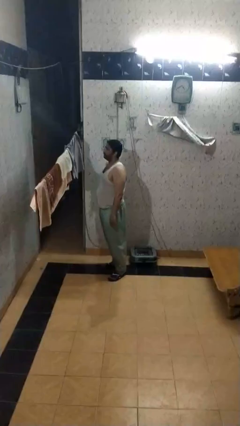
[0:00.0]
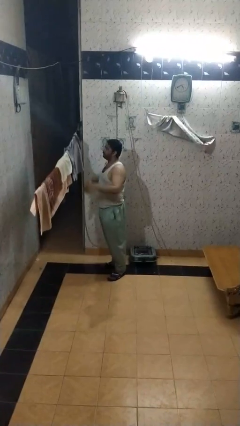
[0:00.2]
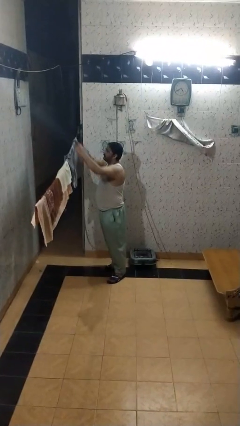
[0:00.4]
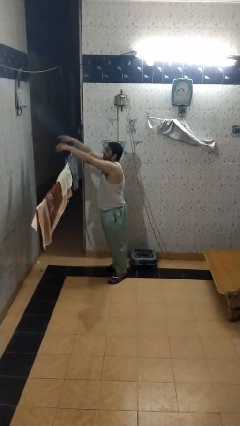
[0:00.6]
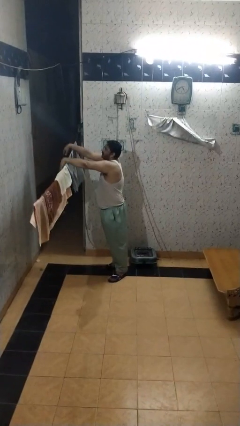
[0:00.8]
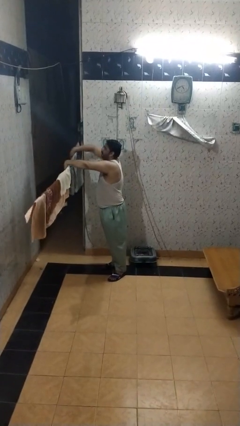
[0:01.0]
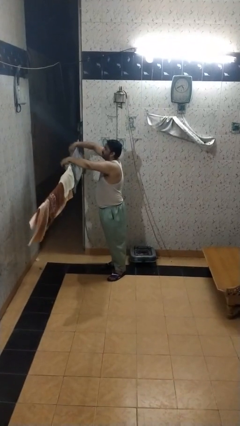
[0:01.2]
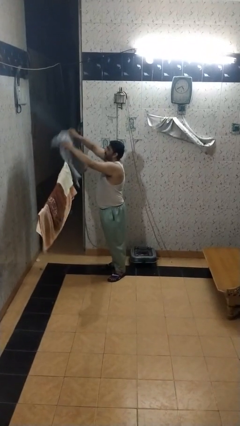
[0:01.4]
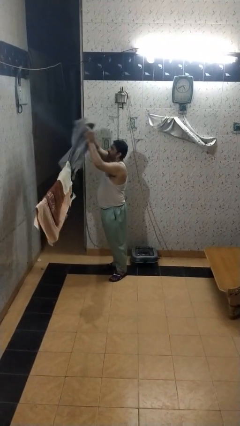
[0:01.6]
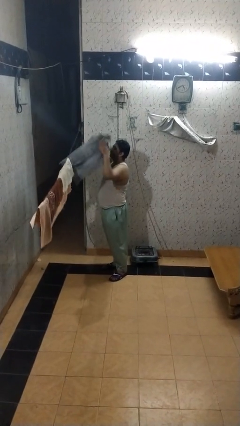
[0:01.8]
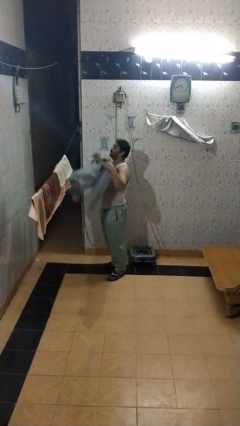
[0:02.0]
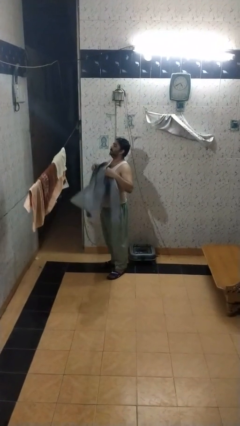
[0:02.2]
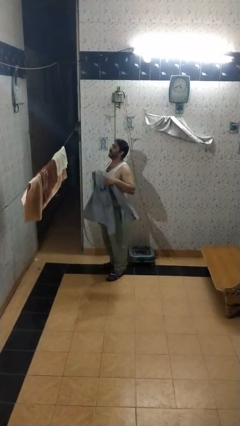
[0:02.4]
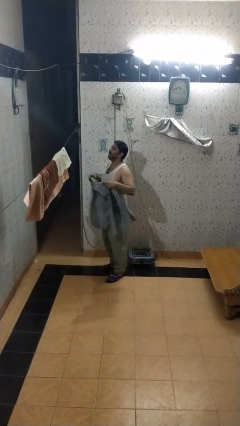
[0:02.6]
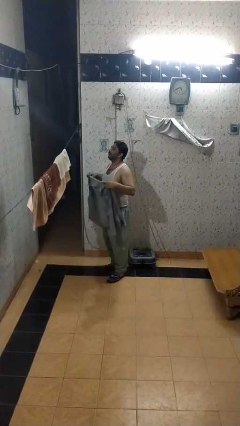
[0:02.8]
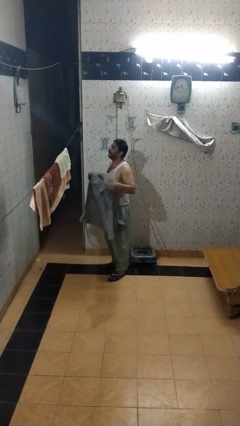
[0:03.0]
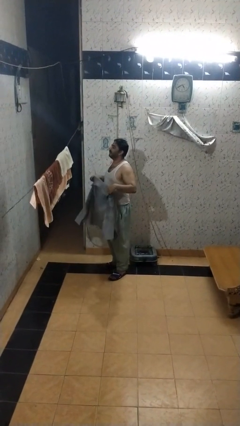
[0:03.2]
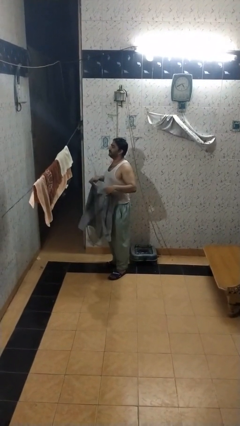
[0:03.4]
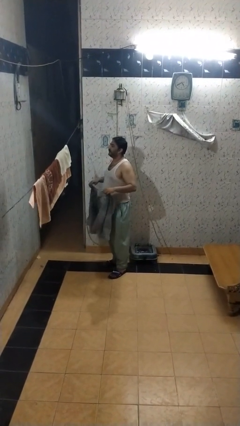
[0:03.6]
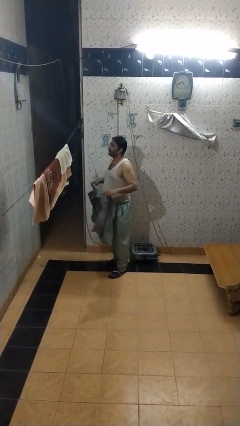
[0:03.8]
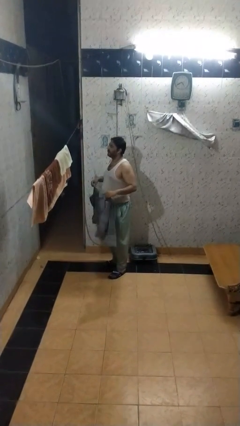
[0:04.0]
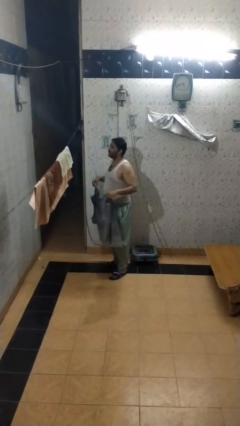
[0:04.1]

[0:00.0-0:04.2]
person takes clothes from closet

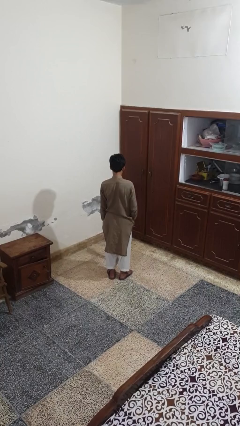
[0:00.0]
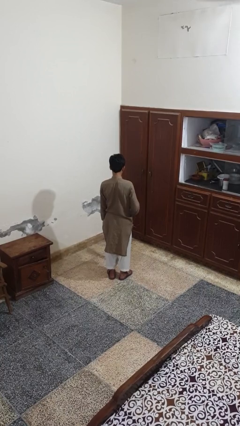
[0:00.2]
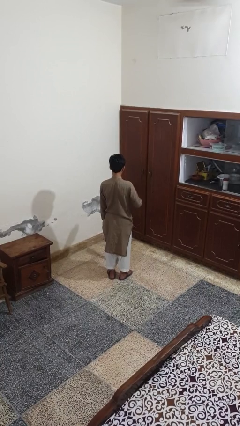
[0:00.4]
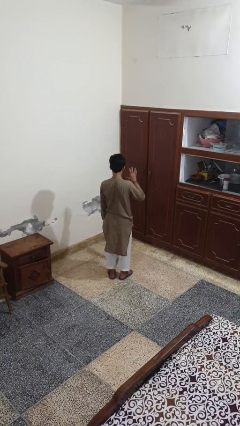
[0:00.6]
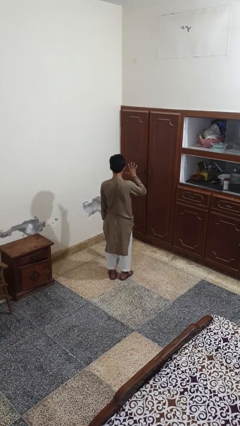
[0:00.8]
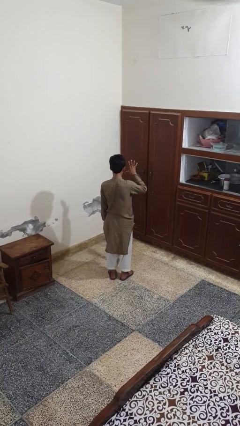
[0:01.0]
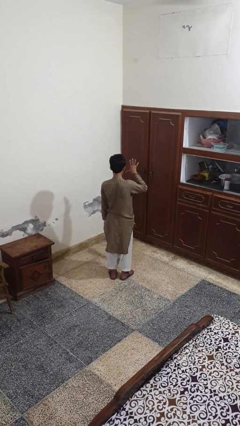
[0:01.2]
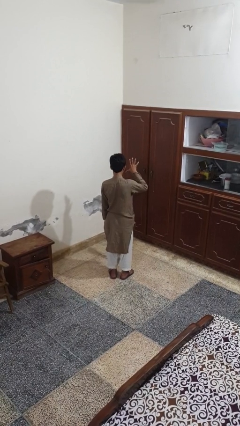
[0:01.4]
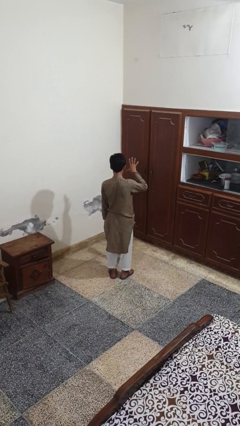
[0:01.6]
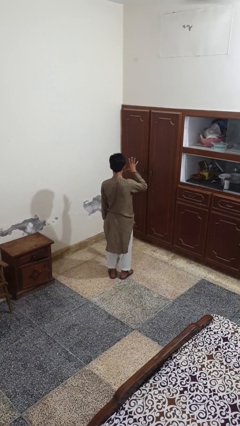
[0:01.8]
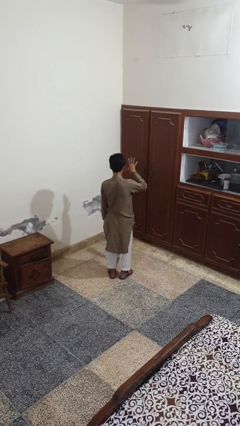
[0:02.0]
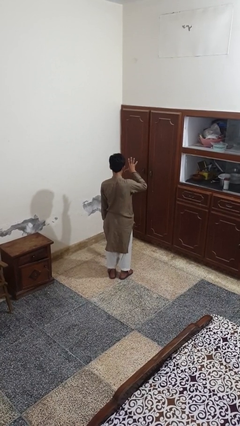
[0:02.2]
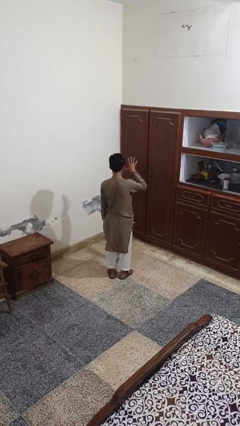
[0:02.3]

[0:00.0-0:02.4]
person gestures number five

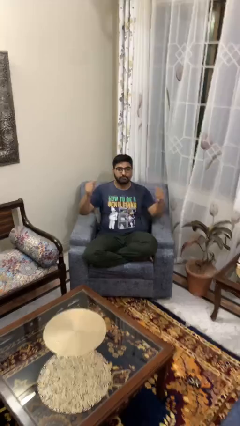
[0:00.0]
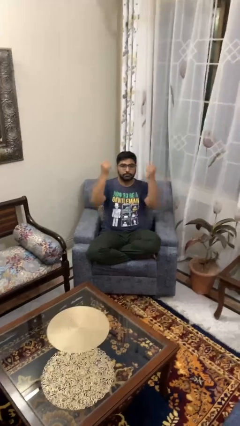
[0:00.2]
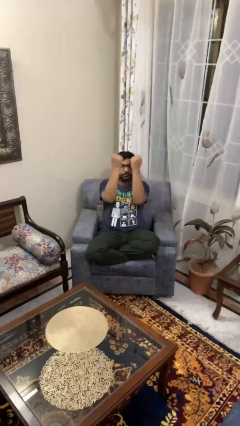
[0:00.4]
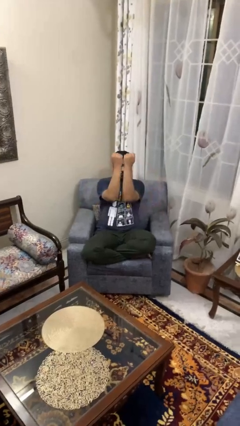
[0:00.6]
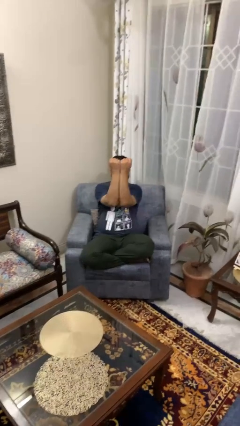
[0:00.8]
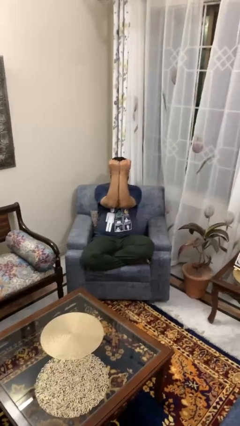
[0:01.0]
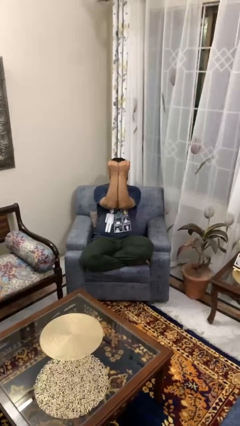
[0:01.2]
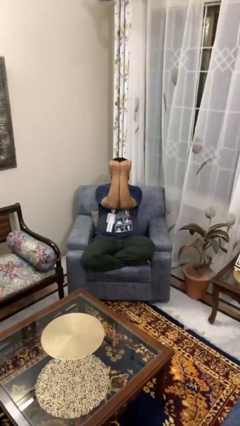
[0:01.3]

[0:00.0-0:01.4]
person gestures zoom in

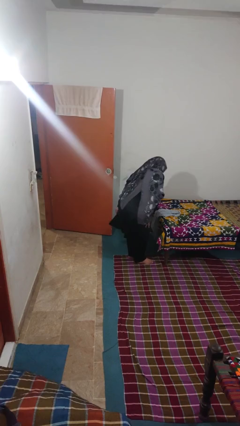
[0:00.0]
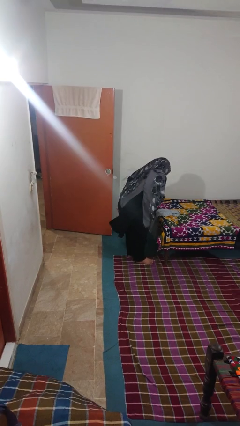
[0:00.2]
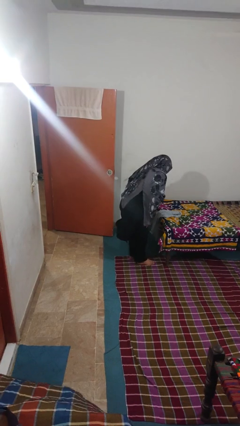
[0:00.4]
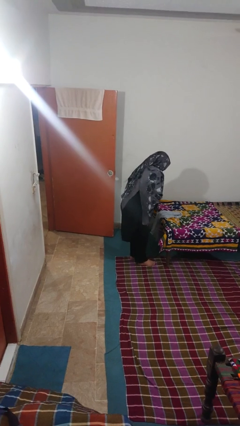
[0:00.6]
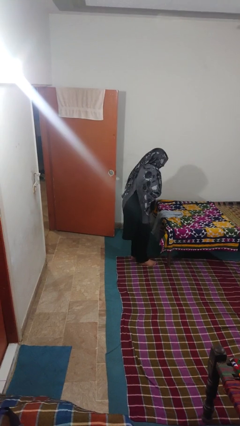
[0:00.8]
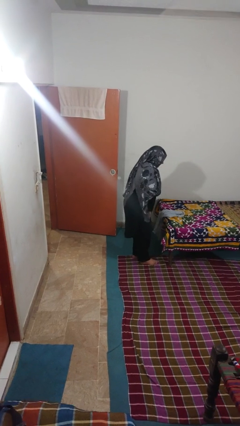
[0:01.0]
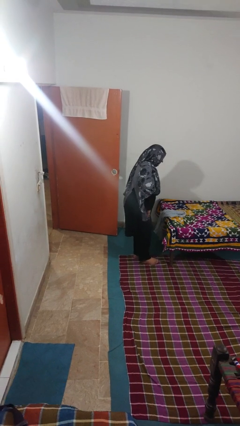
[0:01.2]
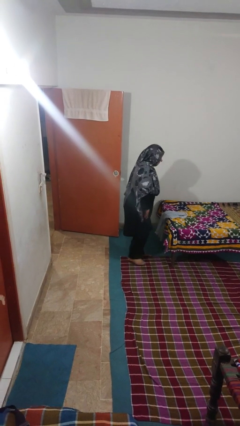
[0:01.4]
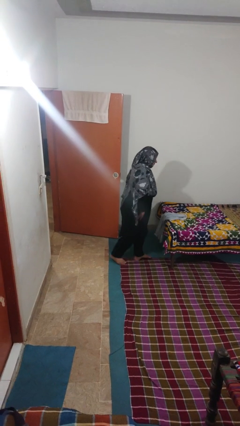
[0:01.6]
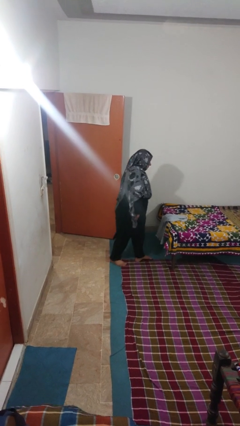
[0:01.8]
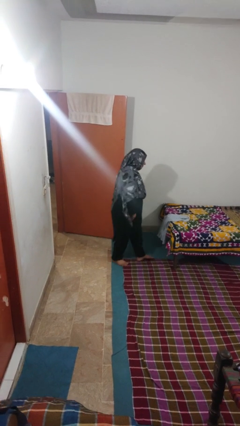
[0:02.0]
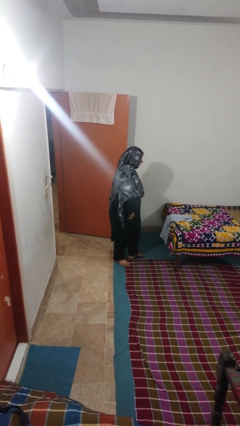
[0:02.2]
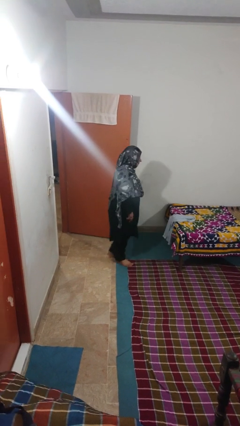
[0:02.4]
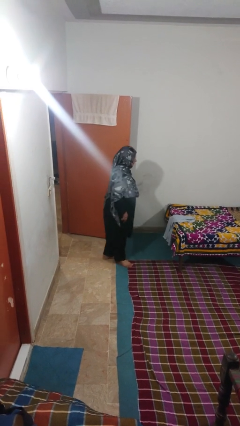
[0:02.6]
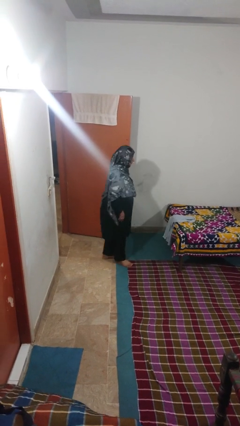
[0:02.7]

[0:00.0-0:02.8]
person stubs toe

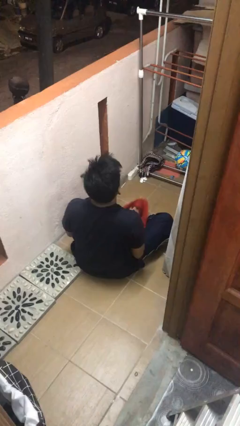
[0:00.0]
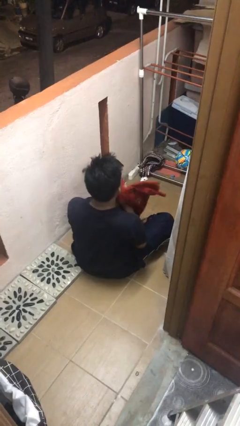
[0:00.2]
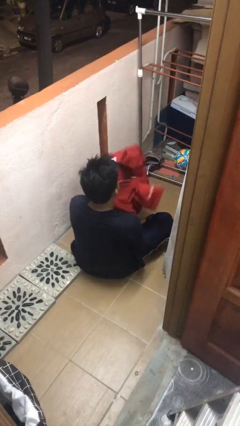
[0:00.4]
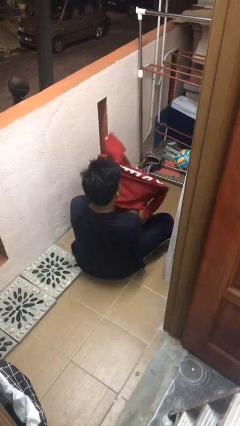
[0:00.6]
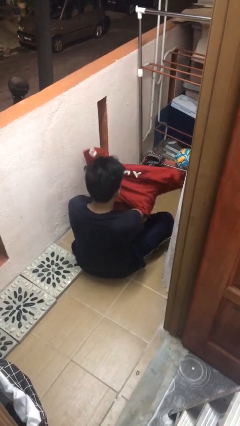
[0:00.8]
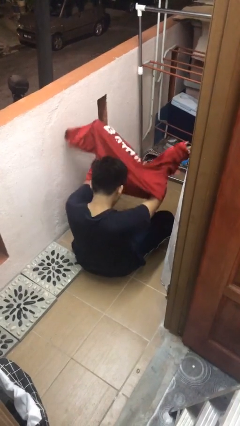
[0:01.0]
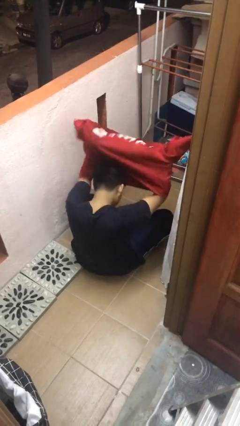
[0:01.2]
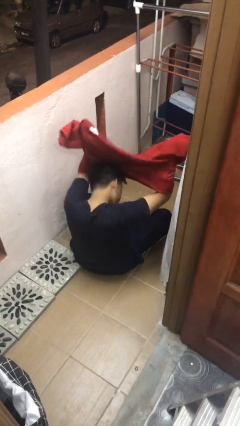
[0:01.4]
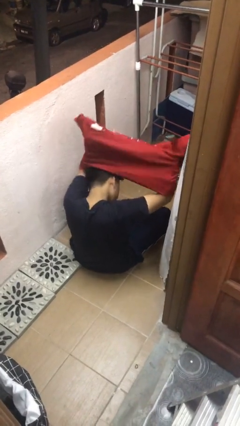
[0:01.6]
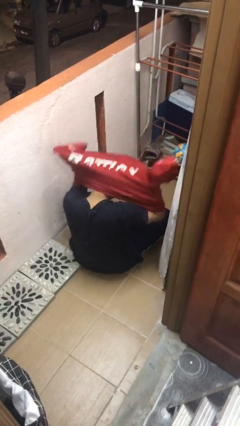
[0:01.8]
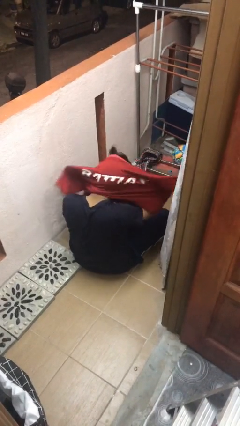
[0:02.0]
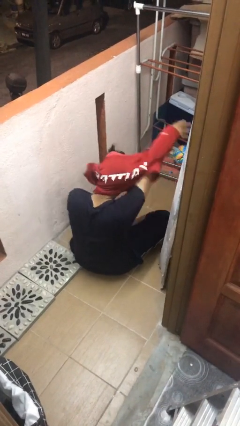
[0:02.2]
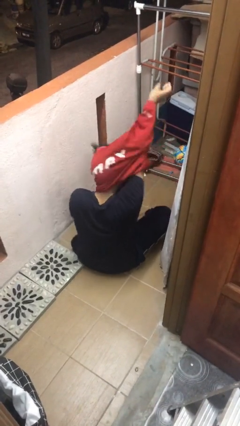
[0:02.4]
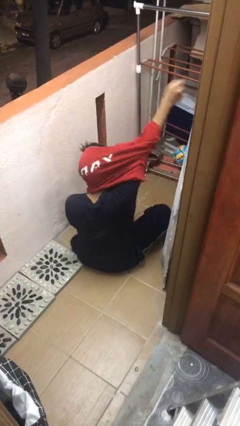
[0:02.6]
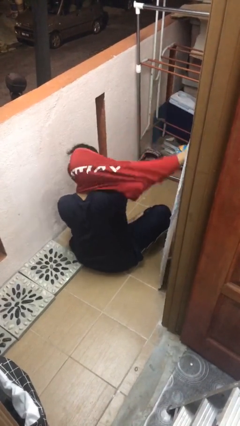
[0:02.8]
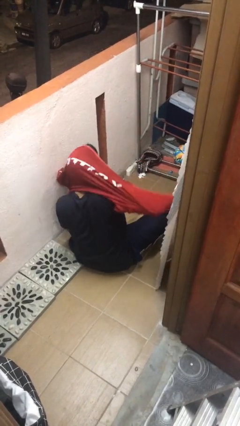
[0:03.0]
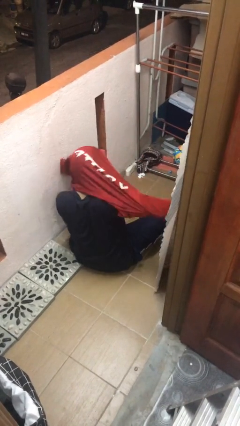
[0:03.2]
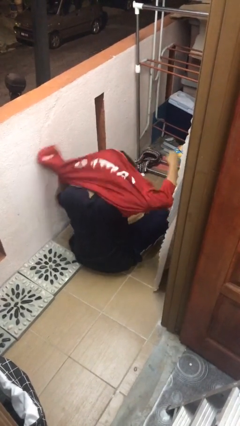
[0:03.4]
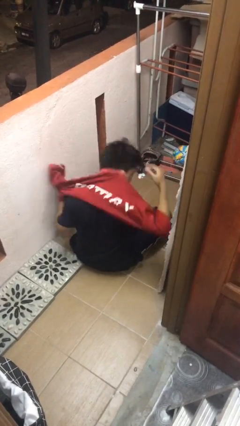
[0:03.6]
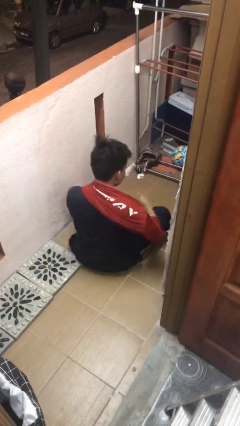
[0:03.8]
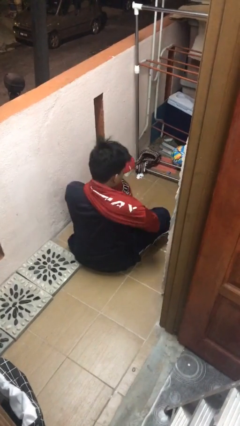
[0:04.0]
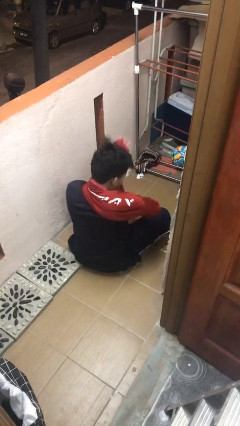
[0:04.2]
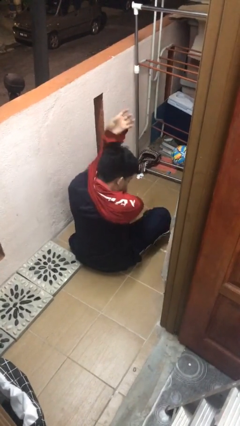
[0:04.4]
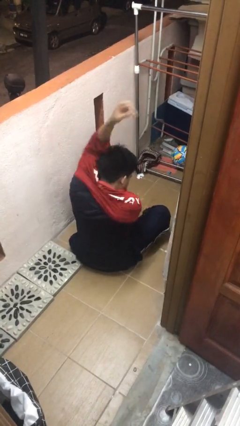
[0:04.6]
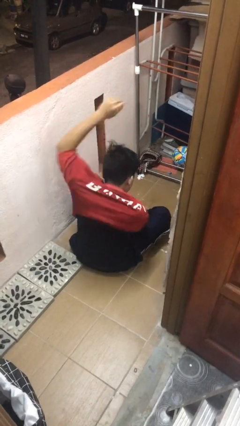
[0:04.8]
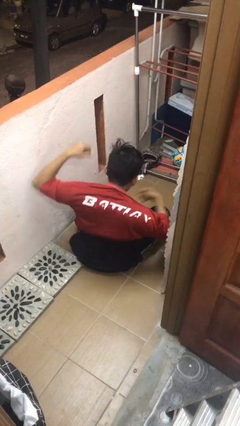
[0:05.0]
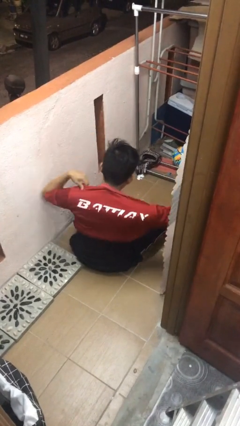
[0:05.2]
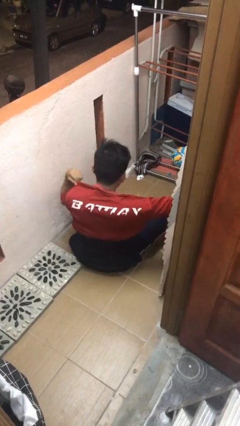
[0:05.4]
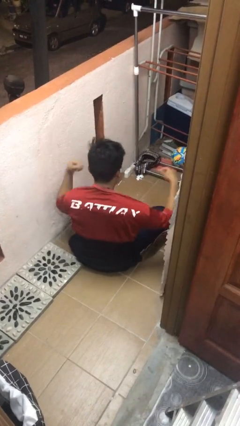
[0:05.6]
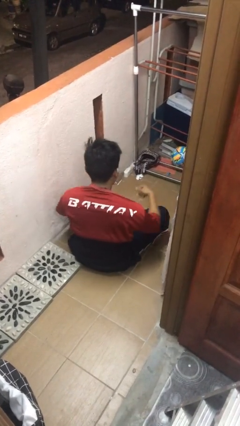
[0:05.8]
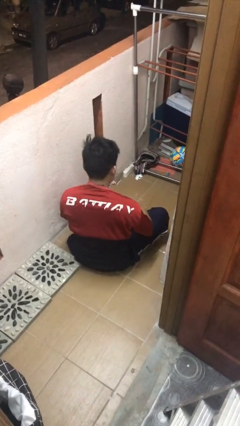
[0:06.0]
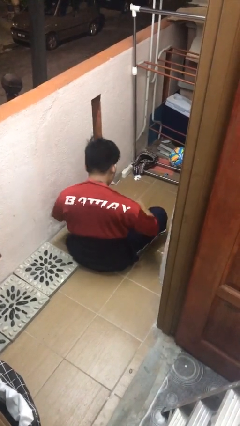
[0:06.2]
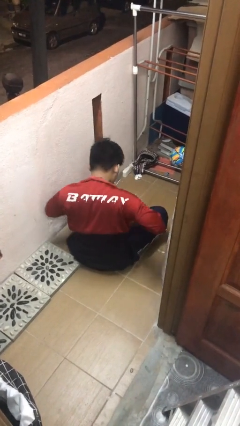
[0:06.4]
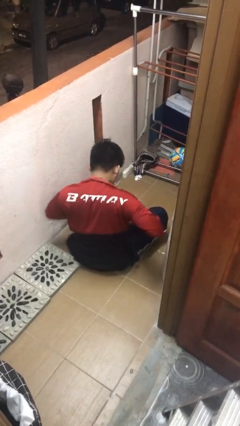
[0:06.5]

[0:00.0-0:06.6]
person puts on shirt

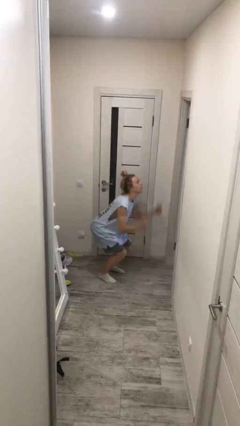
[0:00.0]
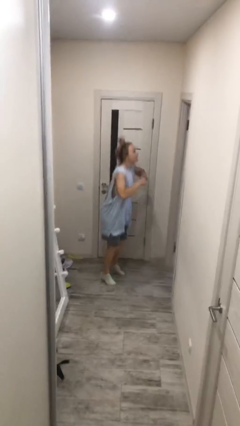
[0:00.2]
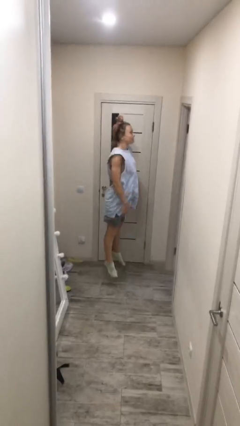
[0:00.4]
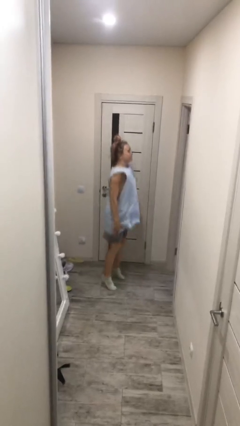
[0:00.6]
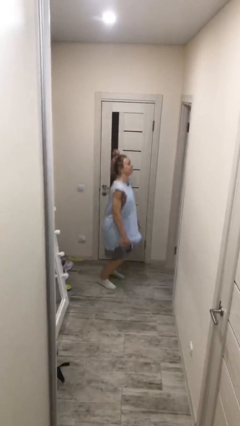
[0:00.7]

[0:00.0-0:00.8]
person jumps
